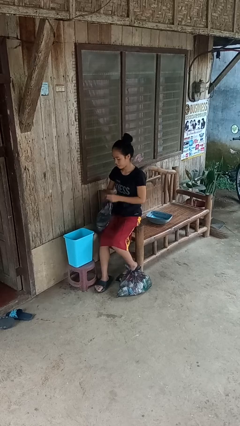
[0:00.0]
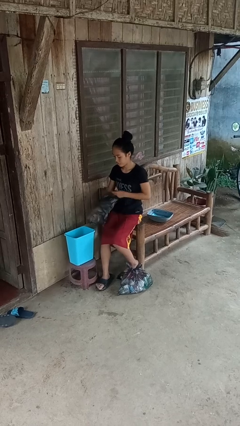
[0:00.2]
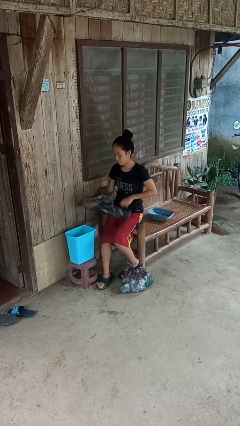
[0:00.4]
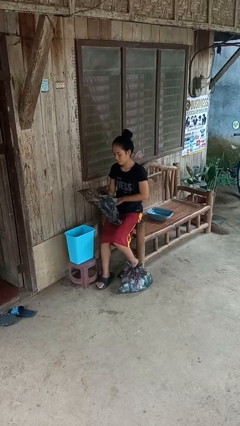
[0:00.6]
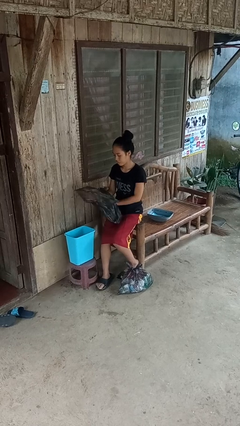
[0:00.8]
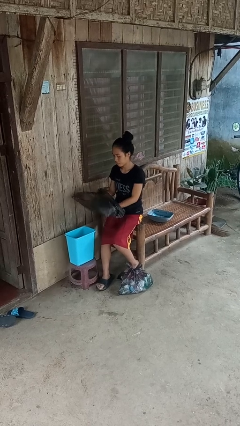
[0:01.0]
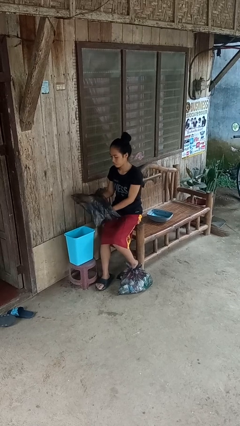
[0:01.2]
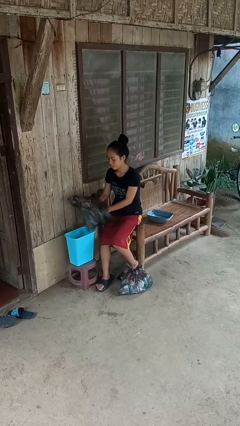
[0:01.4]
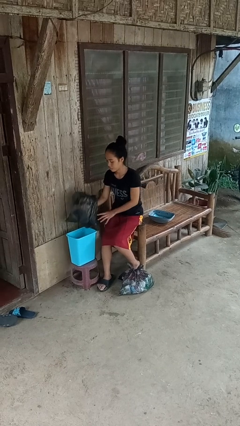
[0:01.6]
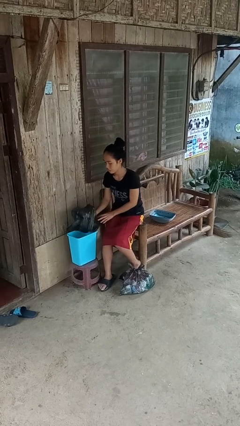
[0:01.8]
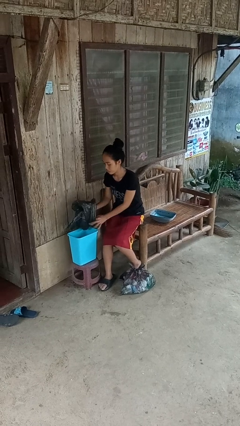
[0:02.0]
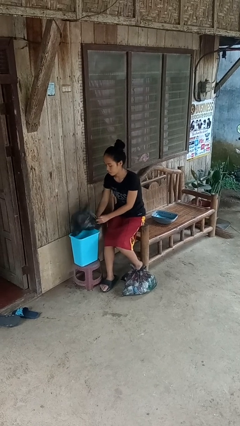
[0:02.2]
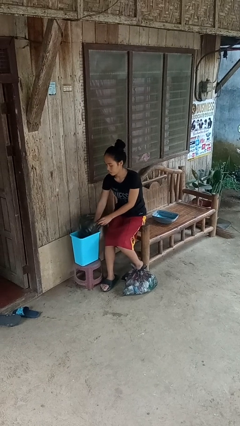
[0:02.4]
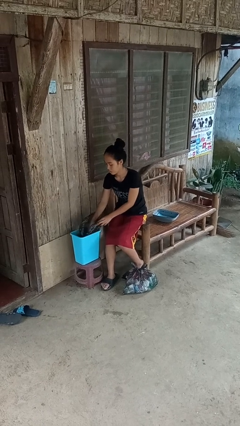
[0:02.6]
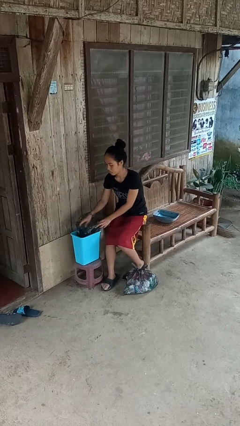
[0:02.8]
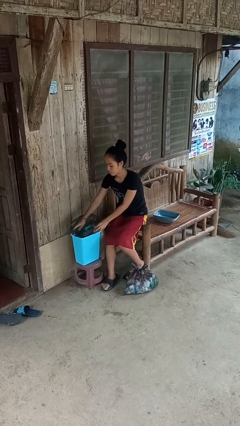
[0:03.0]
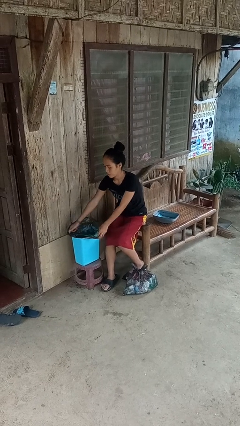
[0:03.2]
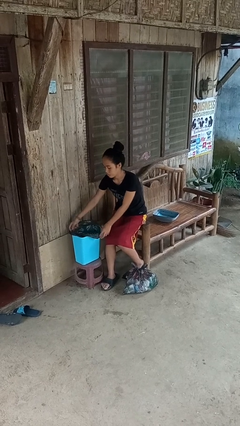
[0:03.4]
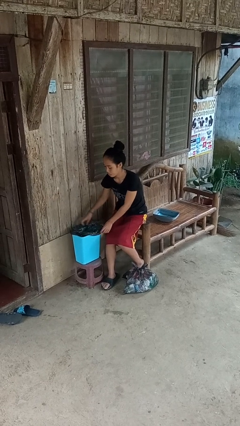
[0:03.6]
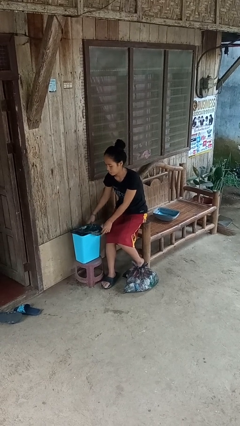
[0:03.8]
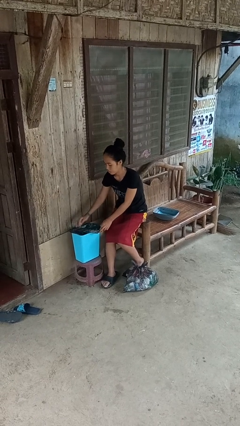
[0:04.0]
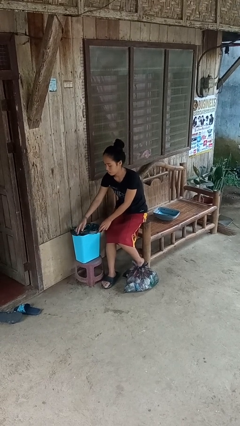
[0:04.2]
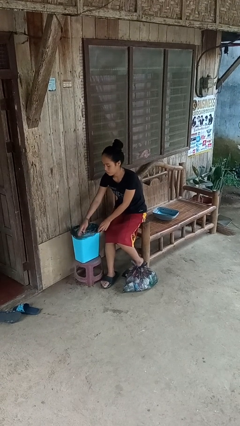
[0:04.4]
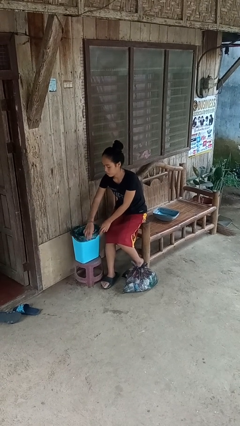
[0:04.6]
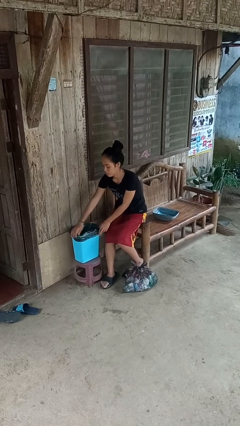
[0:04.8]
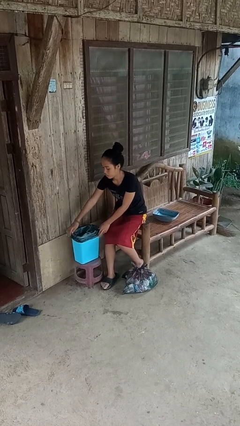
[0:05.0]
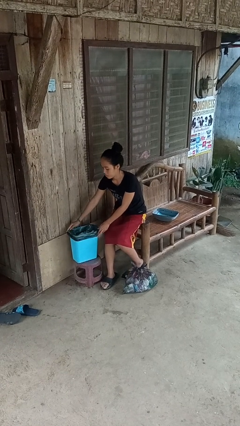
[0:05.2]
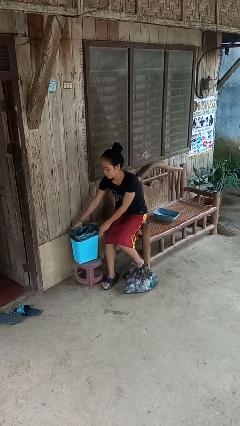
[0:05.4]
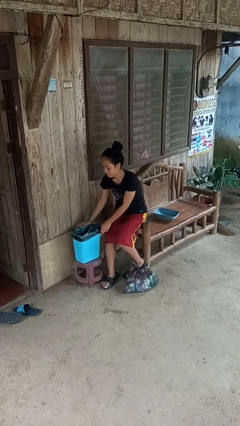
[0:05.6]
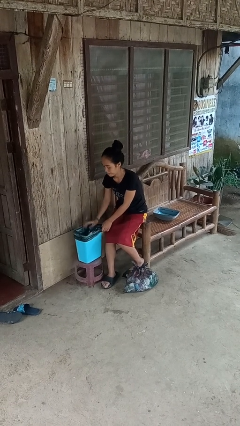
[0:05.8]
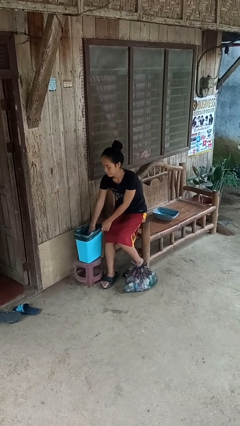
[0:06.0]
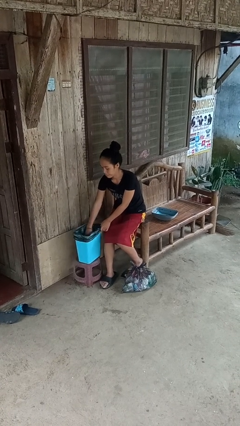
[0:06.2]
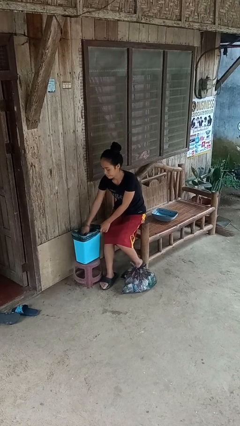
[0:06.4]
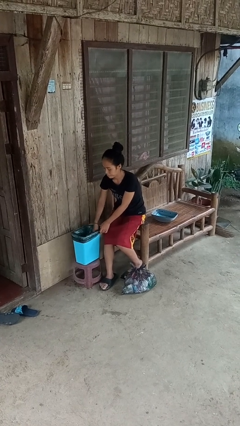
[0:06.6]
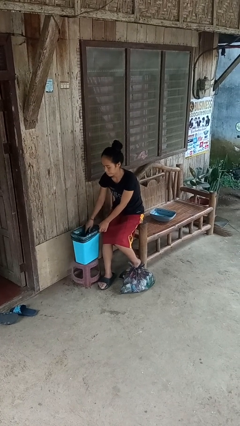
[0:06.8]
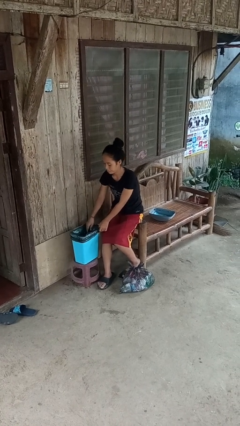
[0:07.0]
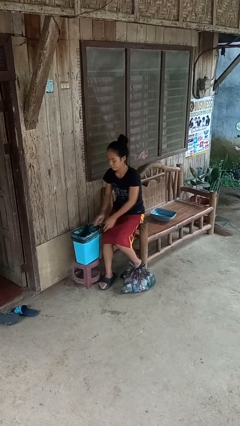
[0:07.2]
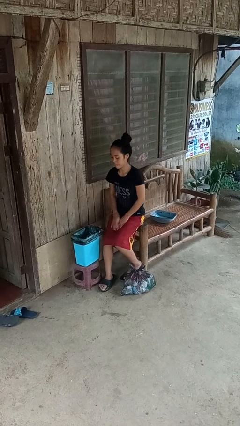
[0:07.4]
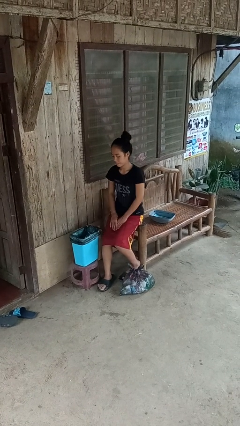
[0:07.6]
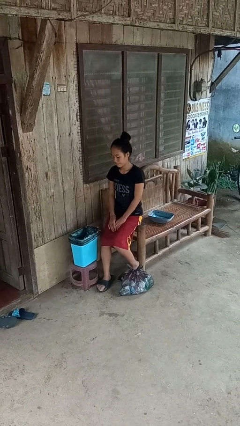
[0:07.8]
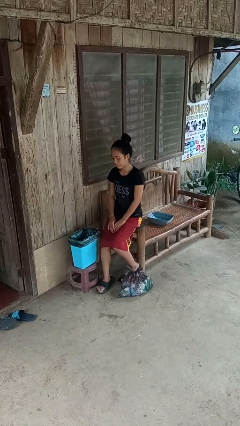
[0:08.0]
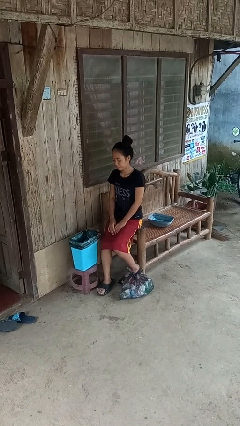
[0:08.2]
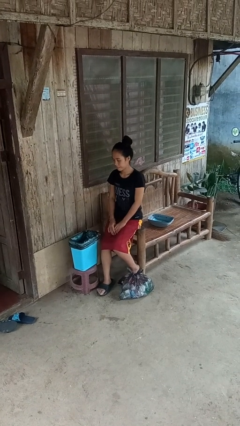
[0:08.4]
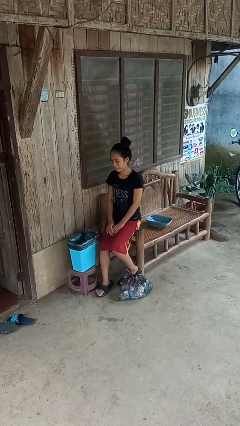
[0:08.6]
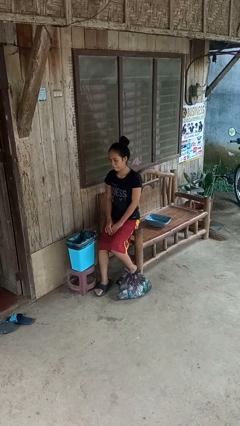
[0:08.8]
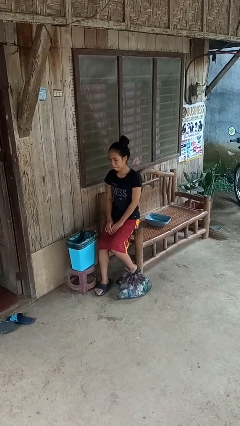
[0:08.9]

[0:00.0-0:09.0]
person inserts trashbag into trashcan

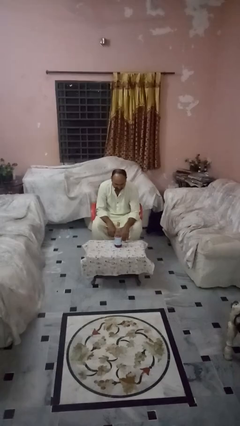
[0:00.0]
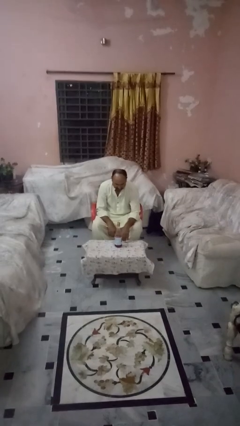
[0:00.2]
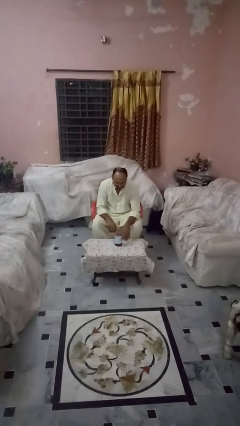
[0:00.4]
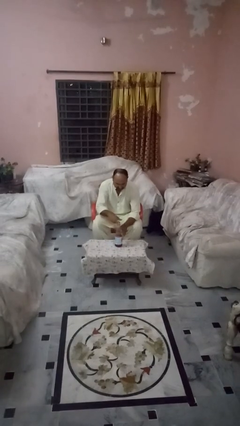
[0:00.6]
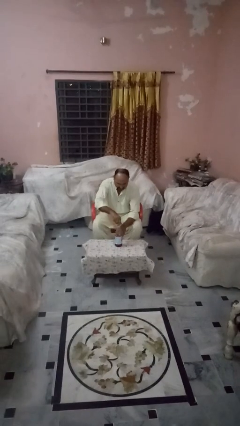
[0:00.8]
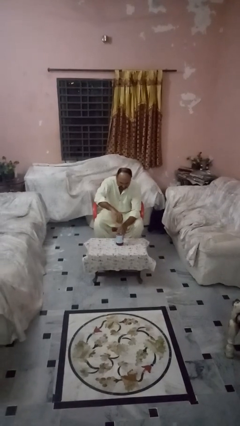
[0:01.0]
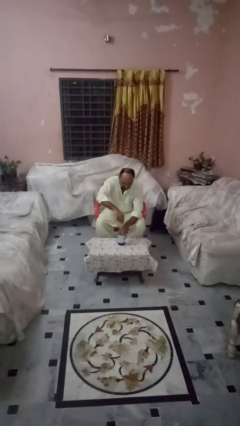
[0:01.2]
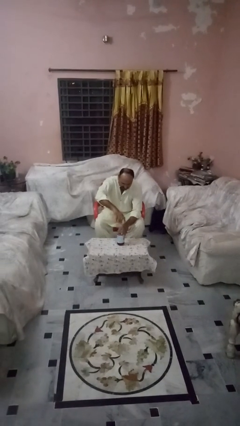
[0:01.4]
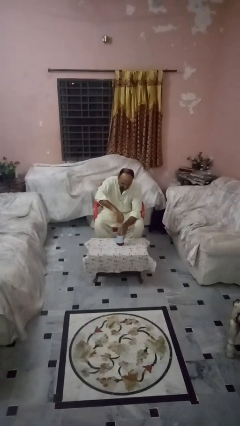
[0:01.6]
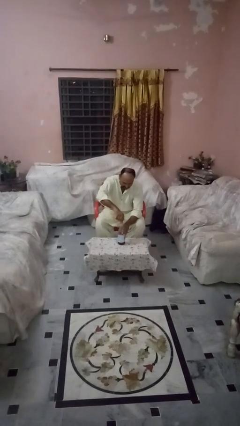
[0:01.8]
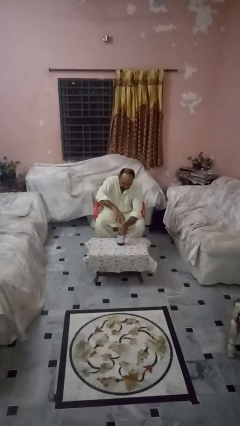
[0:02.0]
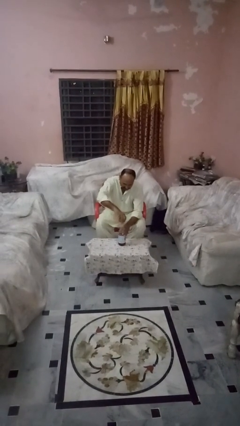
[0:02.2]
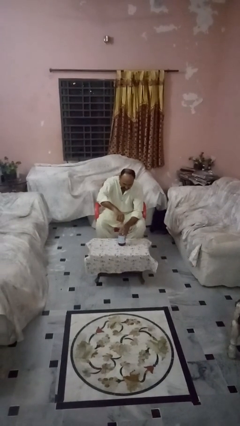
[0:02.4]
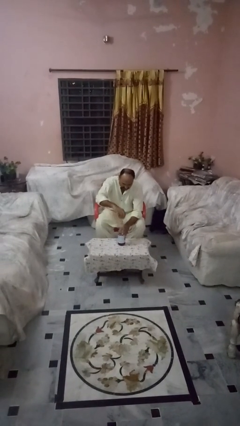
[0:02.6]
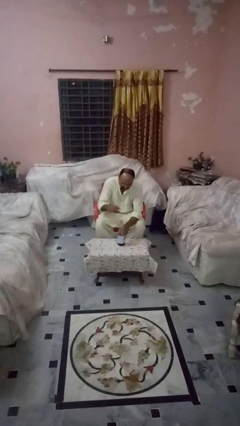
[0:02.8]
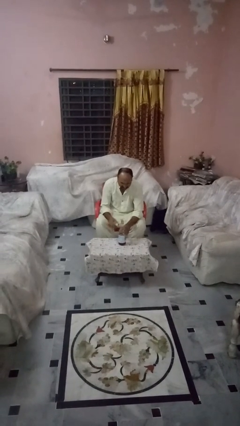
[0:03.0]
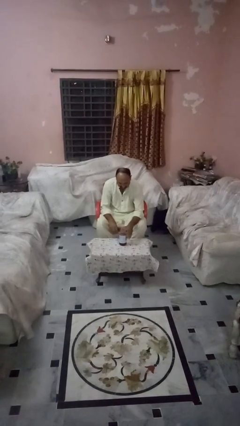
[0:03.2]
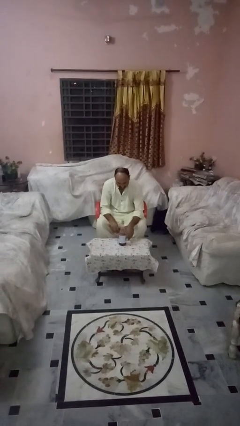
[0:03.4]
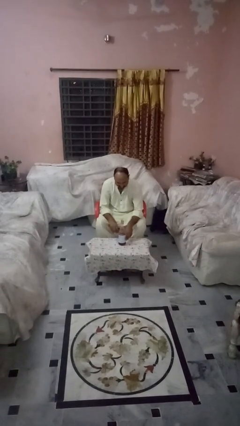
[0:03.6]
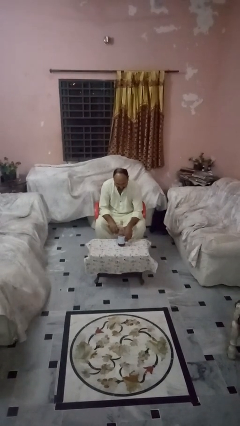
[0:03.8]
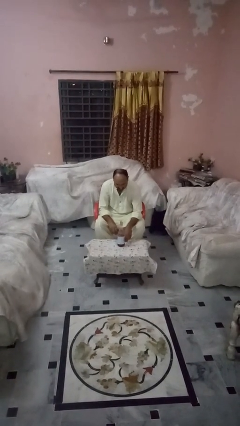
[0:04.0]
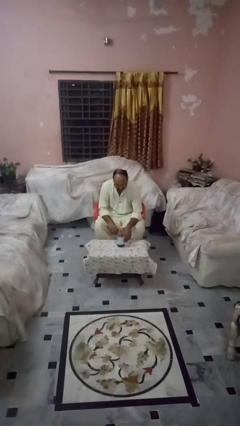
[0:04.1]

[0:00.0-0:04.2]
person unscrews lid from bottle

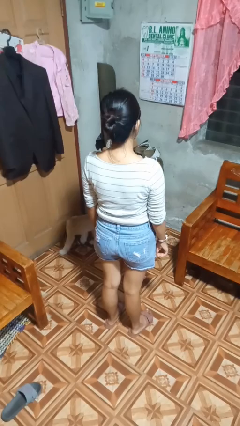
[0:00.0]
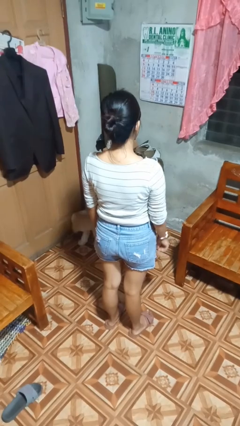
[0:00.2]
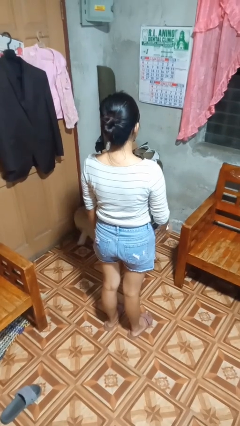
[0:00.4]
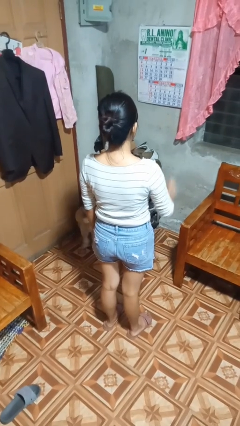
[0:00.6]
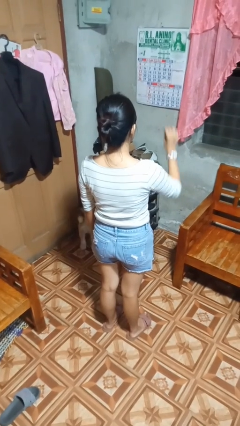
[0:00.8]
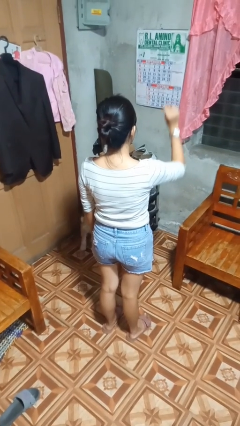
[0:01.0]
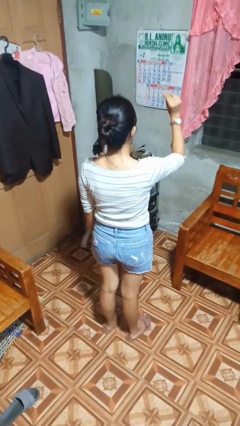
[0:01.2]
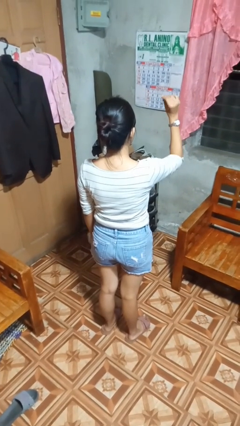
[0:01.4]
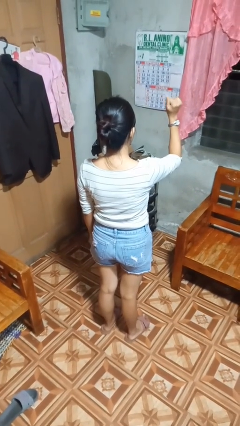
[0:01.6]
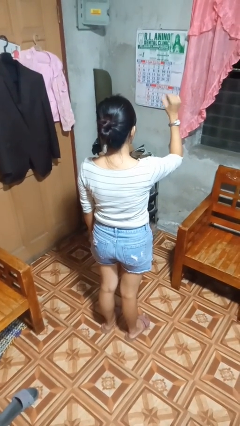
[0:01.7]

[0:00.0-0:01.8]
person snaps fingers

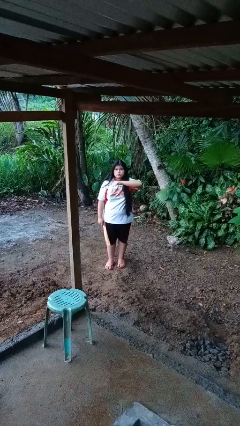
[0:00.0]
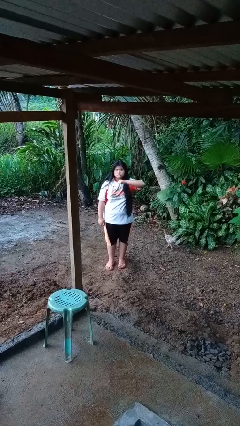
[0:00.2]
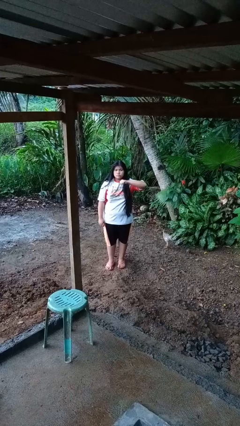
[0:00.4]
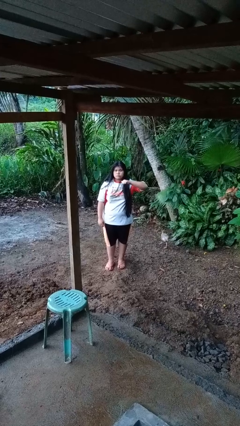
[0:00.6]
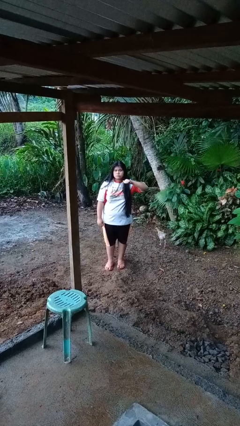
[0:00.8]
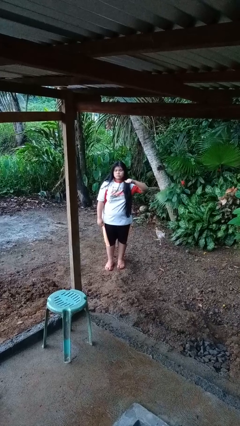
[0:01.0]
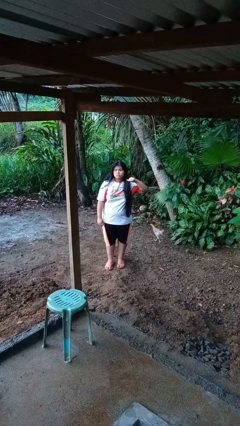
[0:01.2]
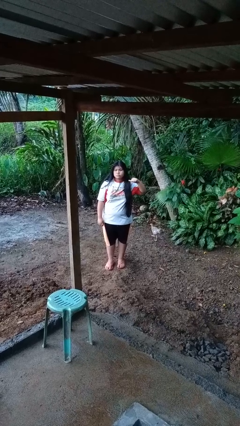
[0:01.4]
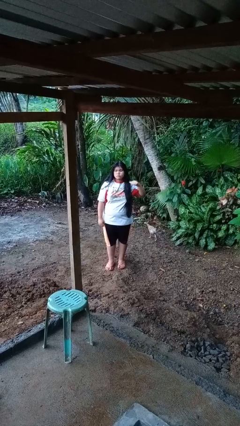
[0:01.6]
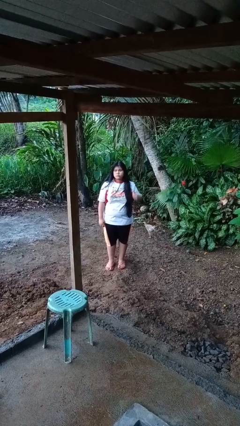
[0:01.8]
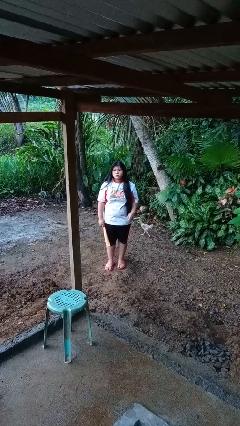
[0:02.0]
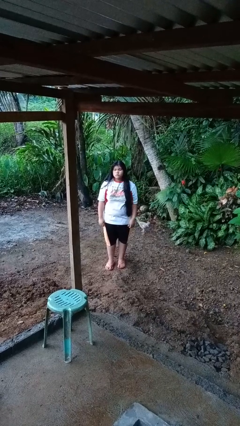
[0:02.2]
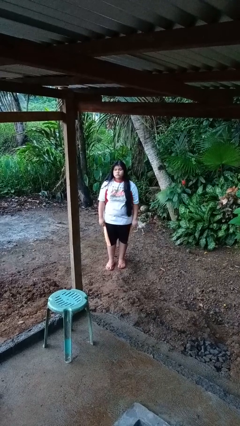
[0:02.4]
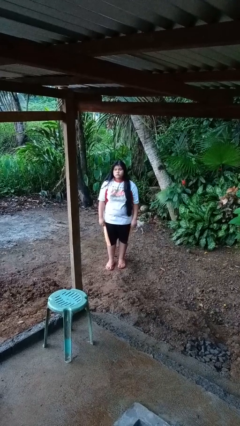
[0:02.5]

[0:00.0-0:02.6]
person gestures cut
